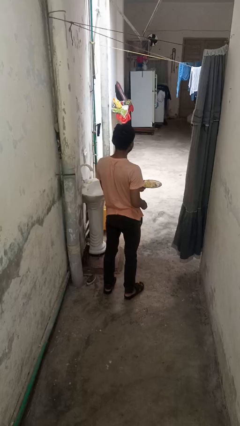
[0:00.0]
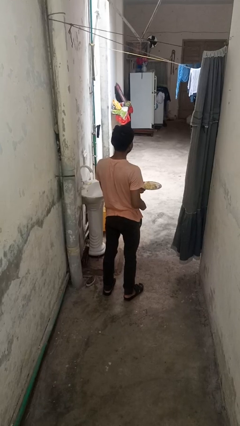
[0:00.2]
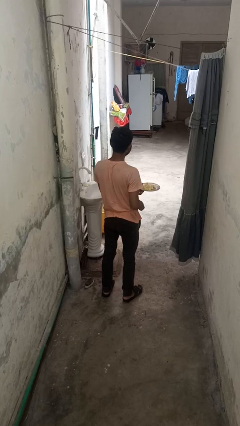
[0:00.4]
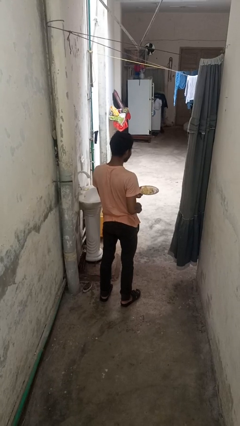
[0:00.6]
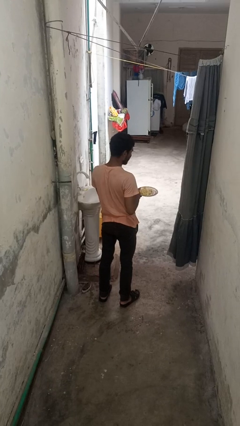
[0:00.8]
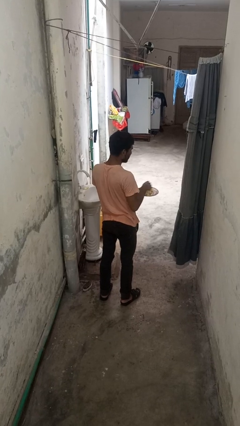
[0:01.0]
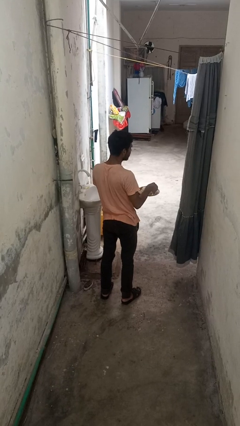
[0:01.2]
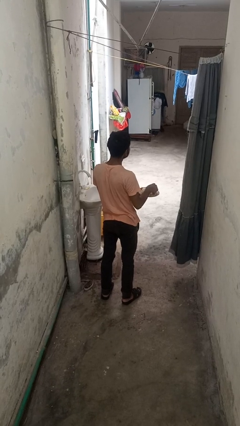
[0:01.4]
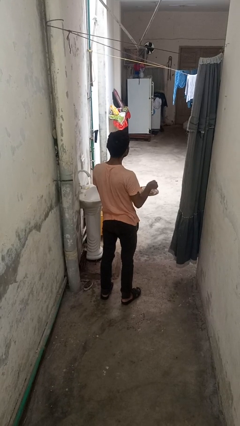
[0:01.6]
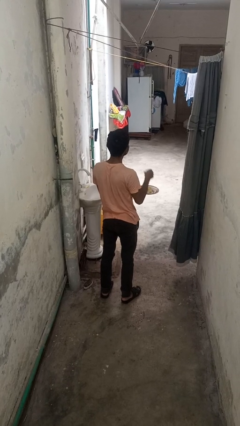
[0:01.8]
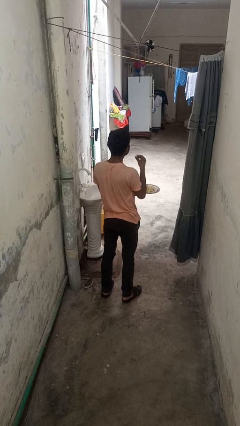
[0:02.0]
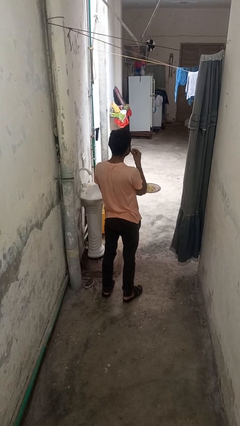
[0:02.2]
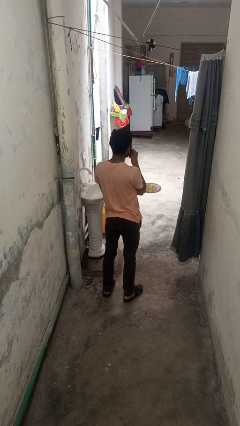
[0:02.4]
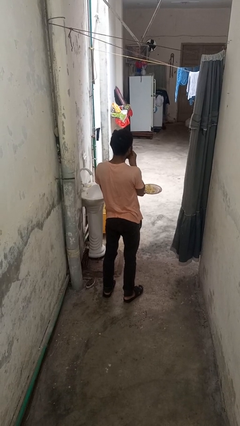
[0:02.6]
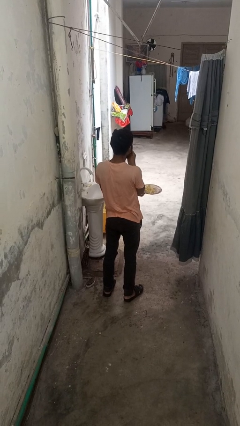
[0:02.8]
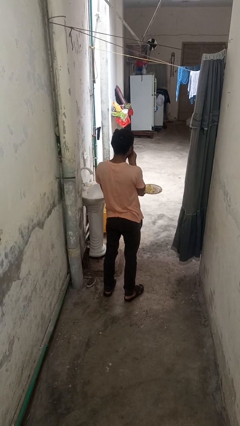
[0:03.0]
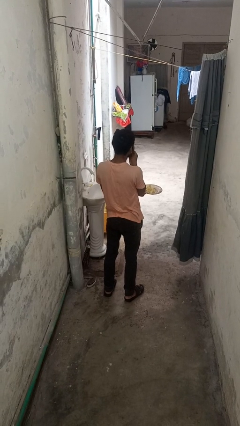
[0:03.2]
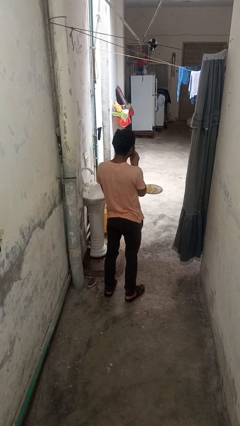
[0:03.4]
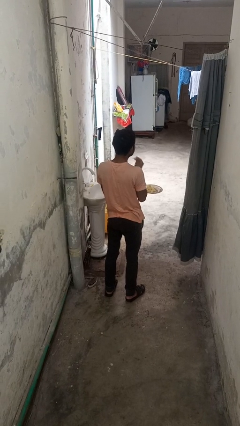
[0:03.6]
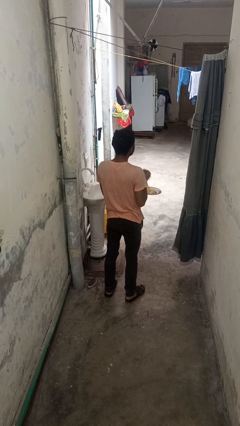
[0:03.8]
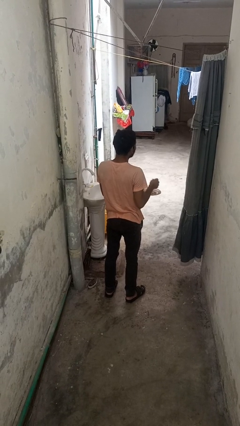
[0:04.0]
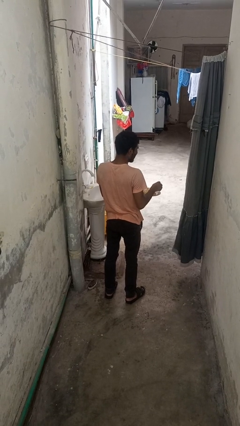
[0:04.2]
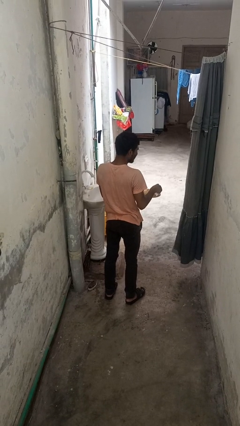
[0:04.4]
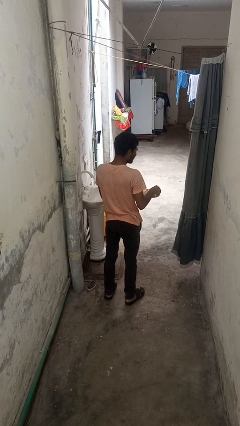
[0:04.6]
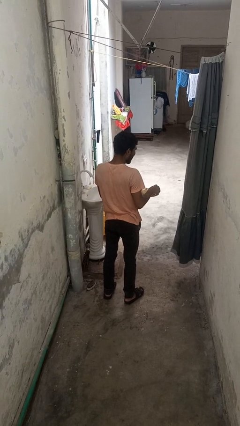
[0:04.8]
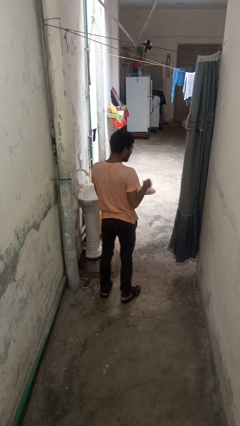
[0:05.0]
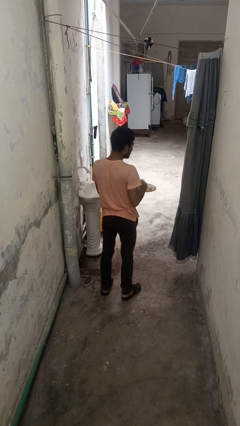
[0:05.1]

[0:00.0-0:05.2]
person eats with hands

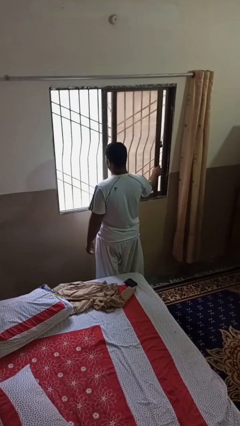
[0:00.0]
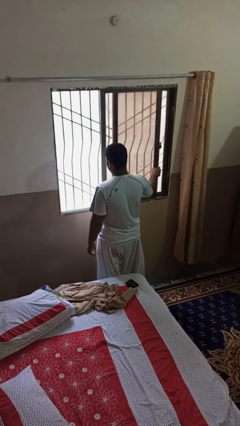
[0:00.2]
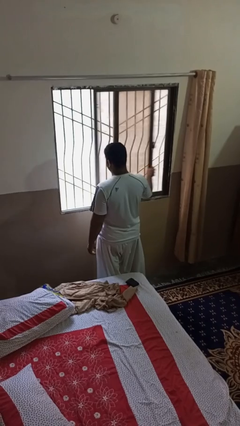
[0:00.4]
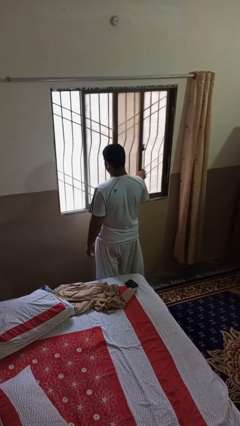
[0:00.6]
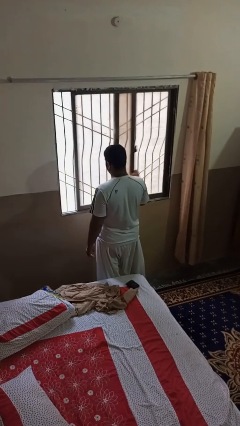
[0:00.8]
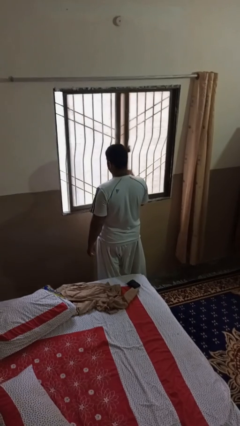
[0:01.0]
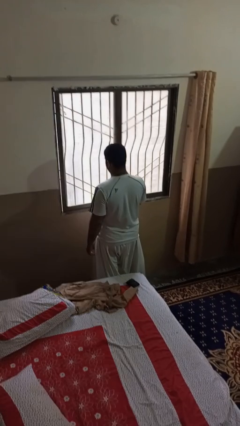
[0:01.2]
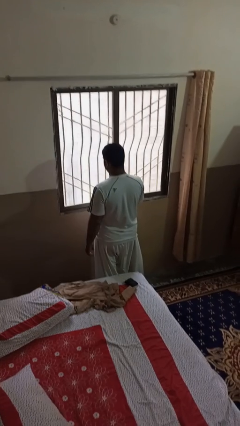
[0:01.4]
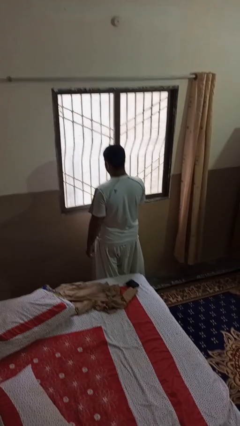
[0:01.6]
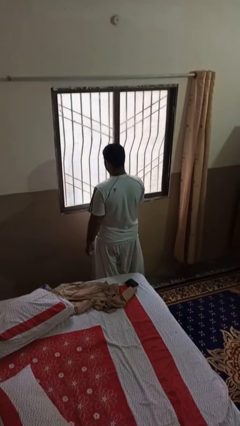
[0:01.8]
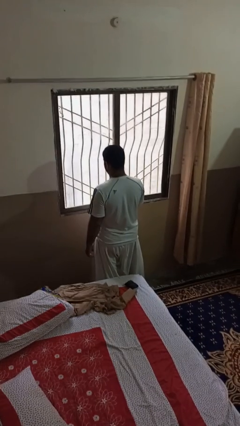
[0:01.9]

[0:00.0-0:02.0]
person closes home window

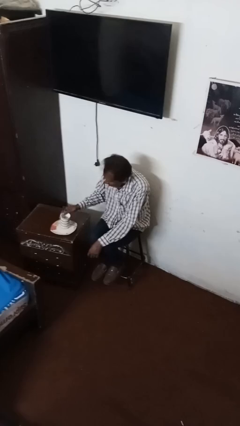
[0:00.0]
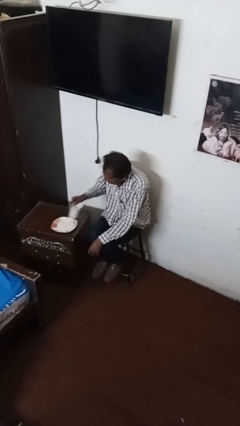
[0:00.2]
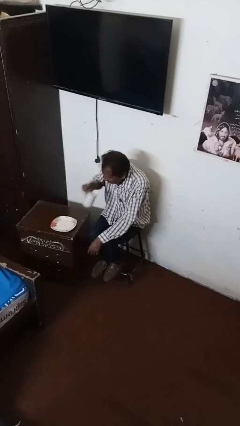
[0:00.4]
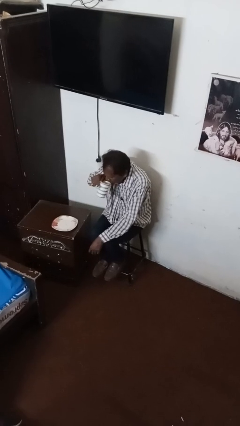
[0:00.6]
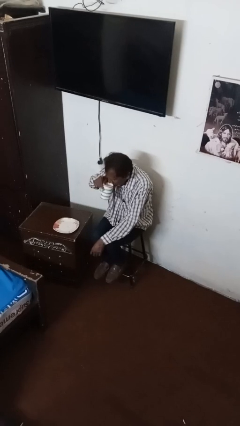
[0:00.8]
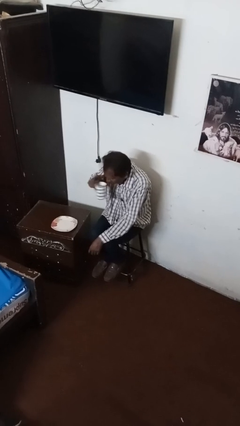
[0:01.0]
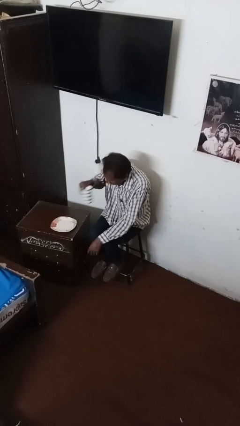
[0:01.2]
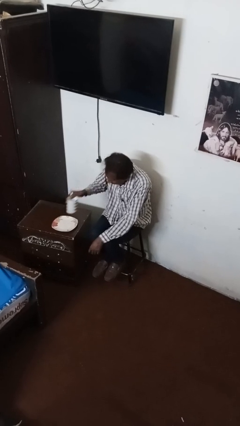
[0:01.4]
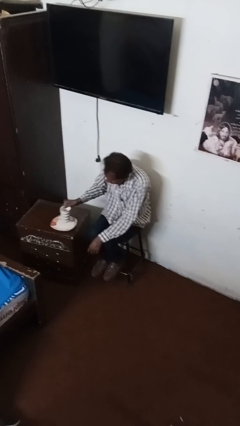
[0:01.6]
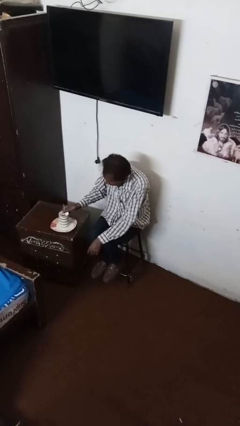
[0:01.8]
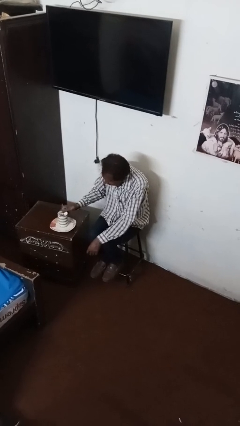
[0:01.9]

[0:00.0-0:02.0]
person drinks from mug

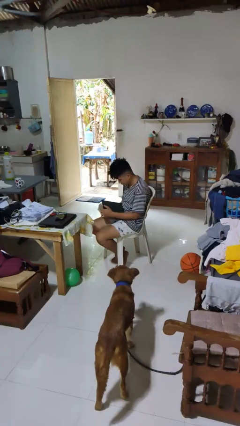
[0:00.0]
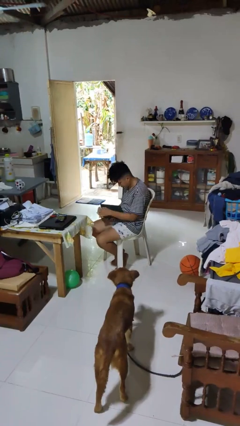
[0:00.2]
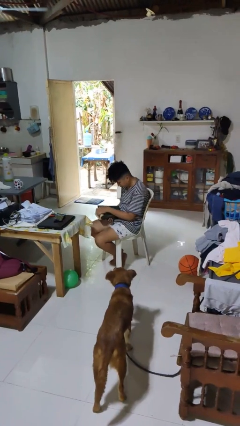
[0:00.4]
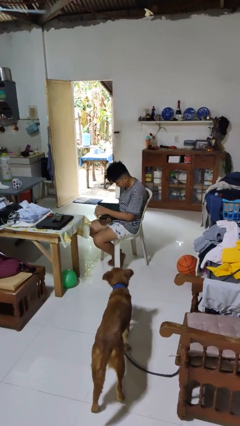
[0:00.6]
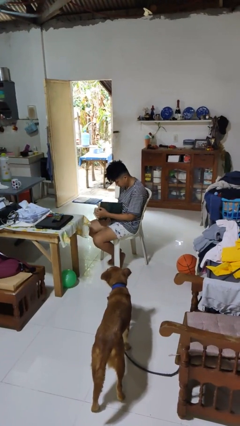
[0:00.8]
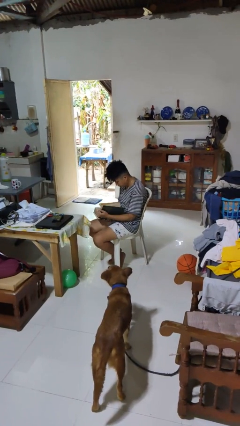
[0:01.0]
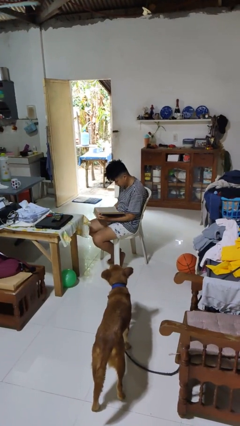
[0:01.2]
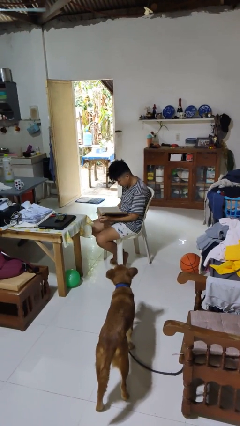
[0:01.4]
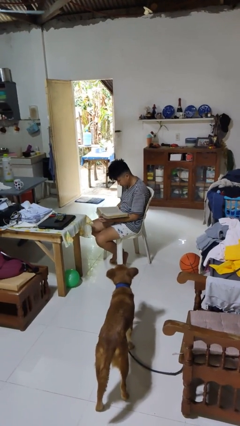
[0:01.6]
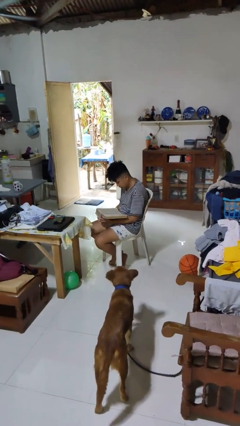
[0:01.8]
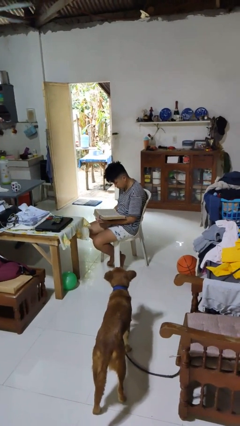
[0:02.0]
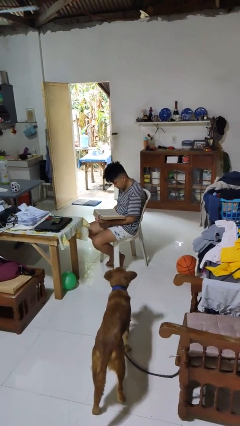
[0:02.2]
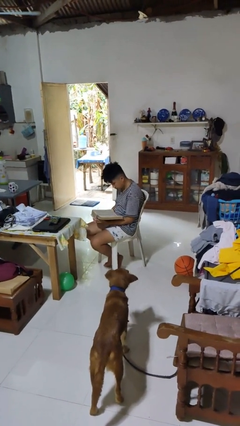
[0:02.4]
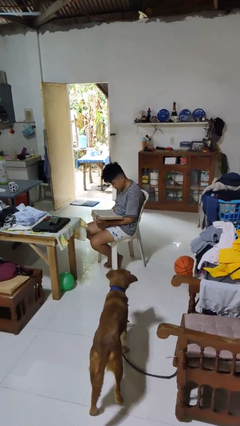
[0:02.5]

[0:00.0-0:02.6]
person reads book

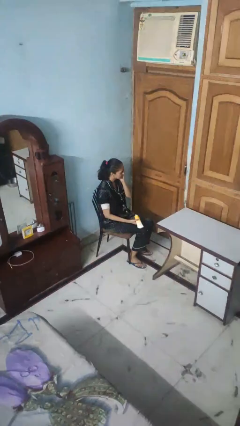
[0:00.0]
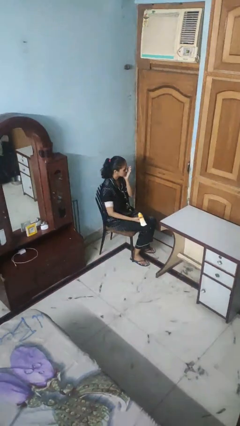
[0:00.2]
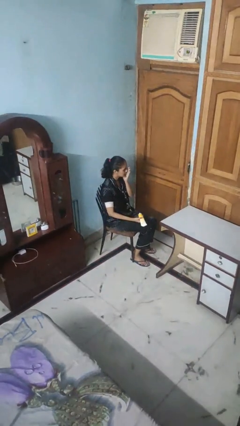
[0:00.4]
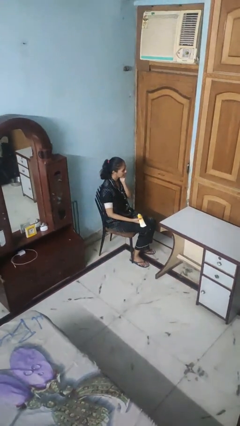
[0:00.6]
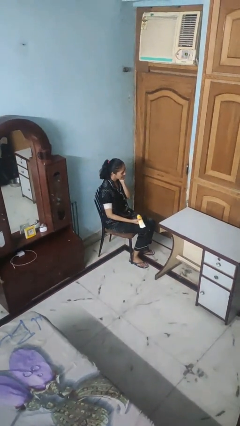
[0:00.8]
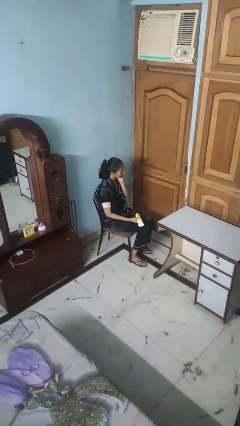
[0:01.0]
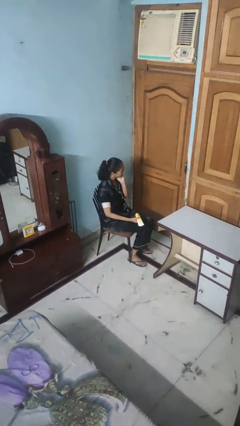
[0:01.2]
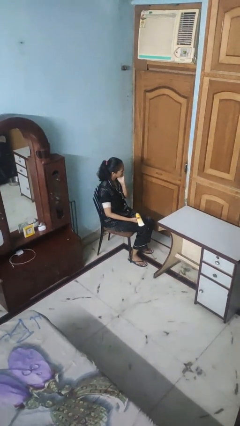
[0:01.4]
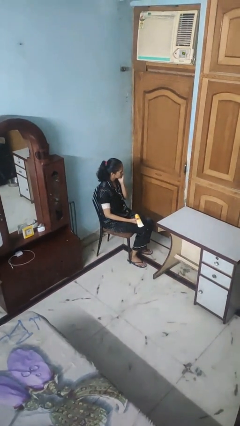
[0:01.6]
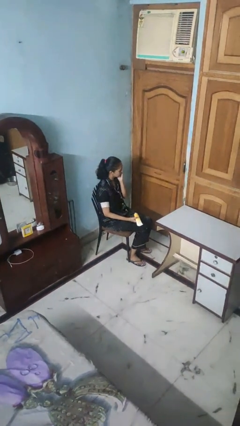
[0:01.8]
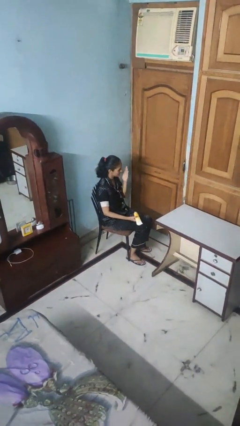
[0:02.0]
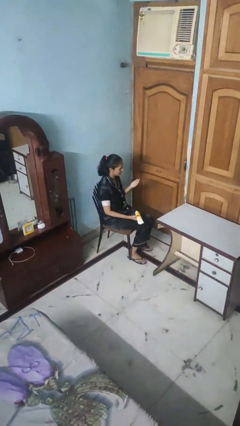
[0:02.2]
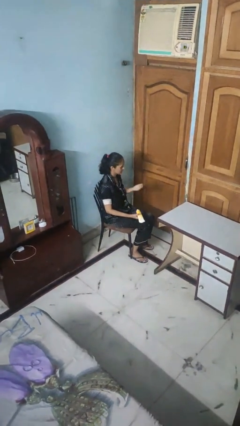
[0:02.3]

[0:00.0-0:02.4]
person applies facial moisturizer

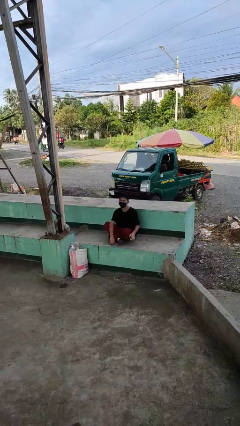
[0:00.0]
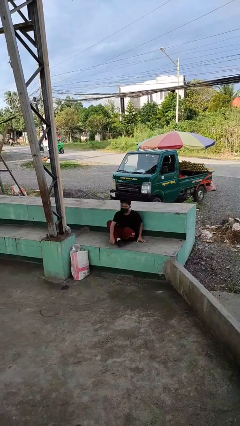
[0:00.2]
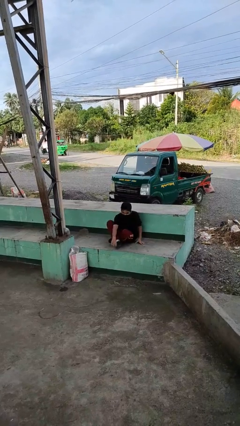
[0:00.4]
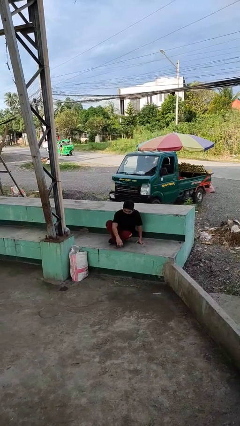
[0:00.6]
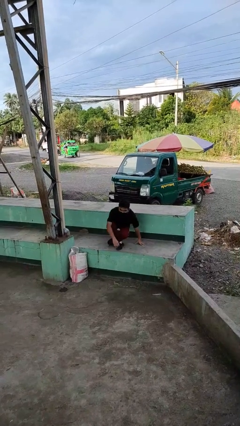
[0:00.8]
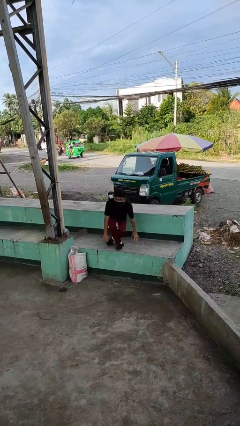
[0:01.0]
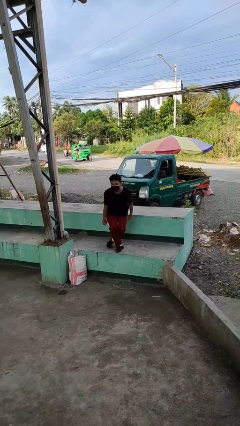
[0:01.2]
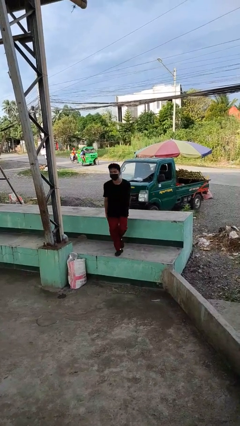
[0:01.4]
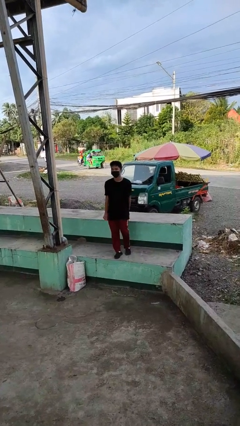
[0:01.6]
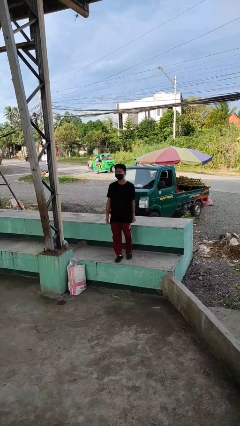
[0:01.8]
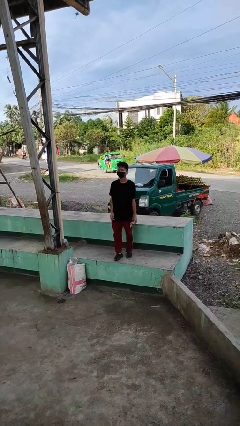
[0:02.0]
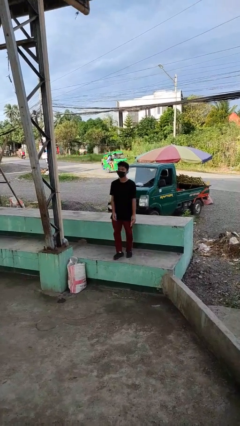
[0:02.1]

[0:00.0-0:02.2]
person stands up from floor

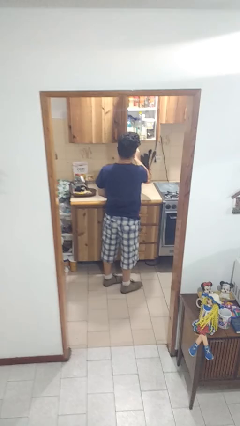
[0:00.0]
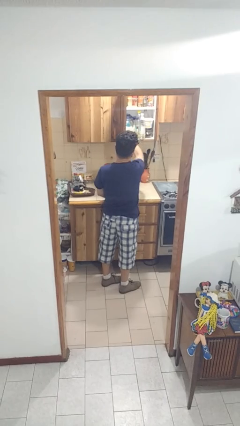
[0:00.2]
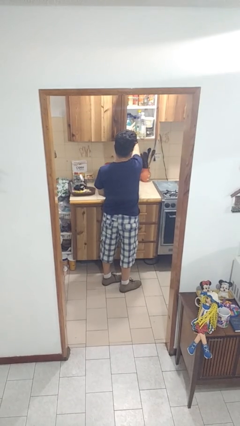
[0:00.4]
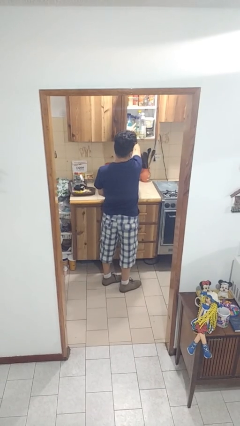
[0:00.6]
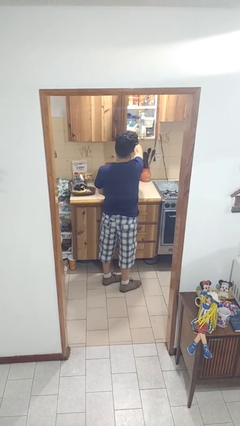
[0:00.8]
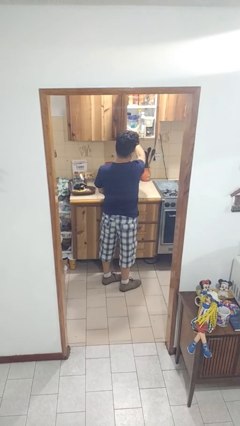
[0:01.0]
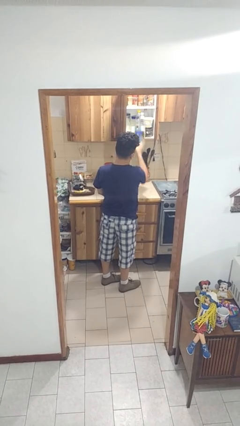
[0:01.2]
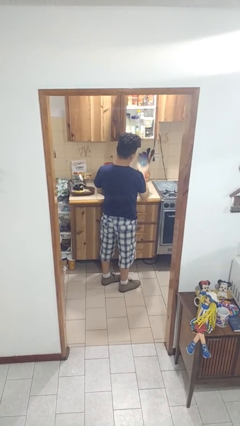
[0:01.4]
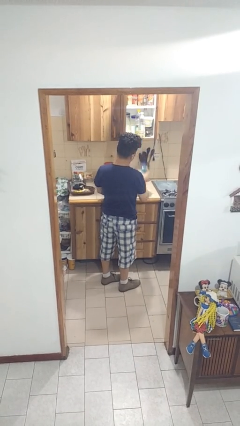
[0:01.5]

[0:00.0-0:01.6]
person takes object from cabinet
